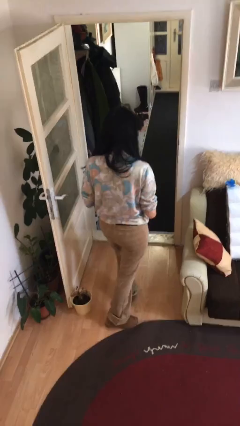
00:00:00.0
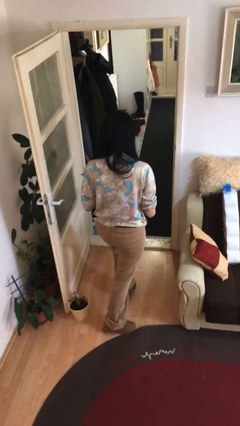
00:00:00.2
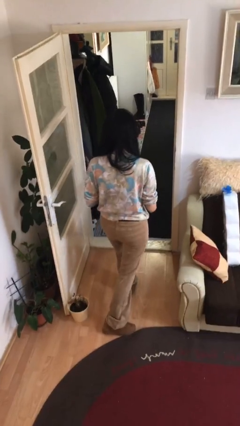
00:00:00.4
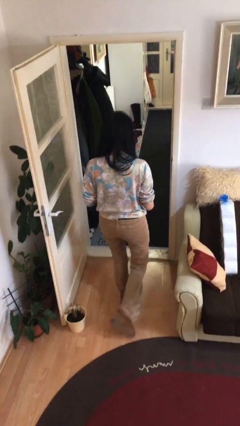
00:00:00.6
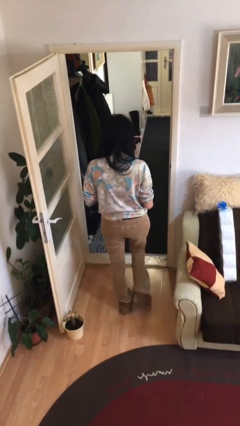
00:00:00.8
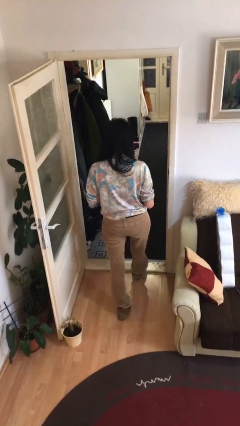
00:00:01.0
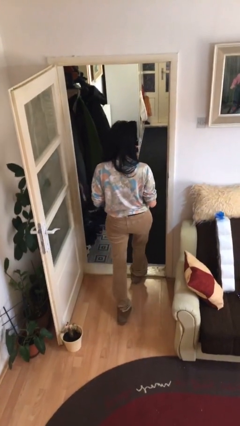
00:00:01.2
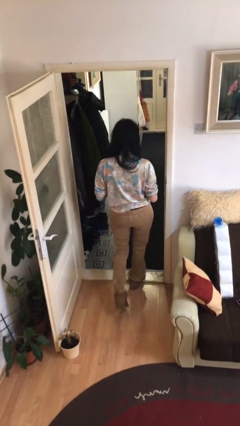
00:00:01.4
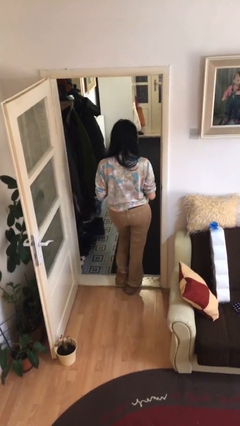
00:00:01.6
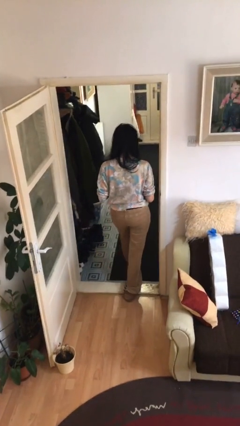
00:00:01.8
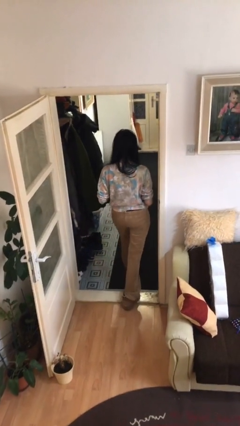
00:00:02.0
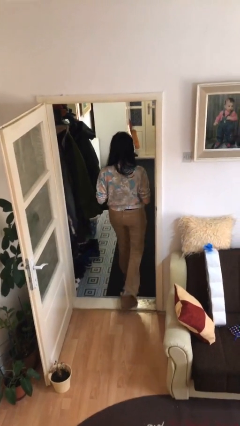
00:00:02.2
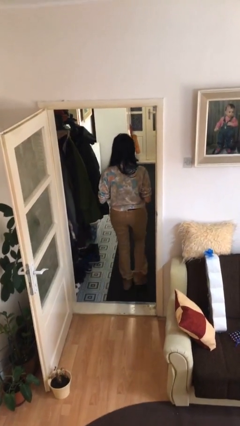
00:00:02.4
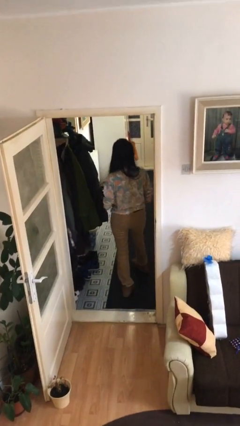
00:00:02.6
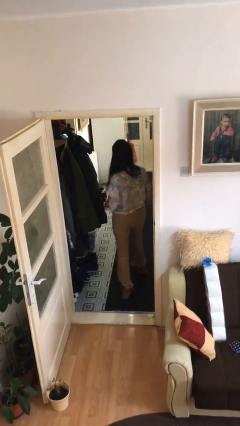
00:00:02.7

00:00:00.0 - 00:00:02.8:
person exits scene through structure

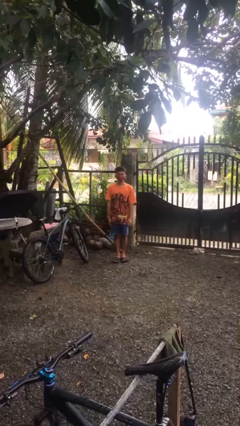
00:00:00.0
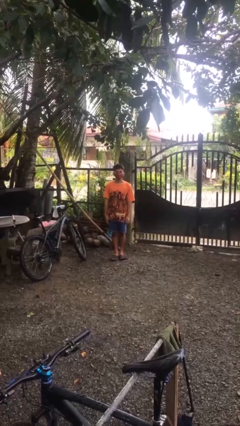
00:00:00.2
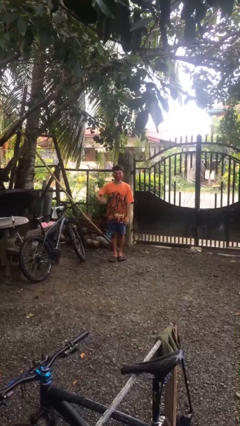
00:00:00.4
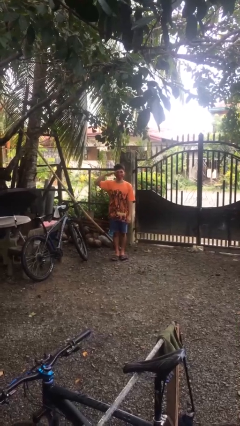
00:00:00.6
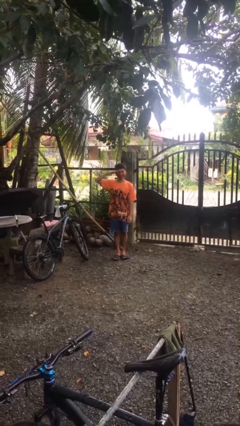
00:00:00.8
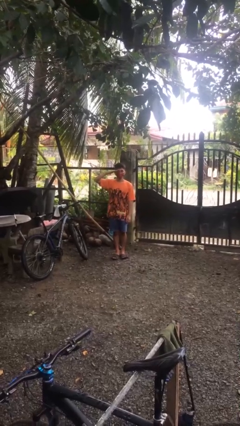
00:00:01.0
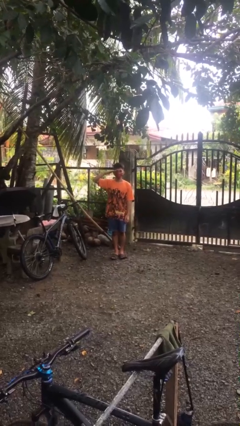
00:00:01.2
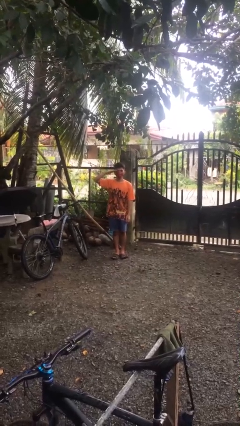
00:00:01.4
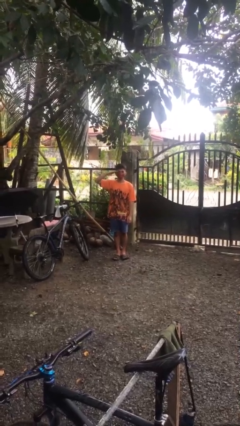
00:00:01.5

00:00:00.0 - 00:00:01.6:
person salutes

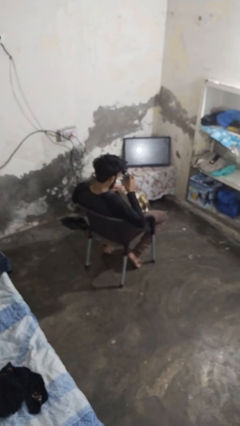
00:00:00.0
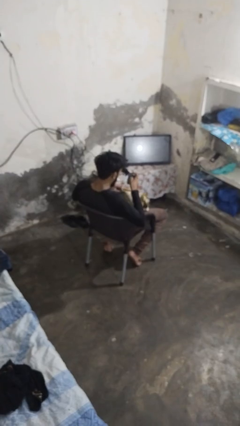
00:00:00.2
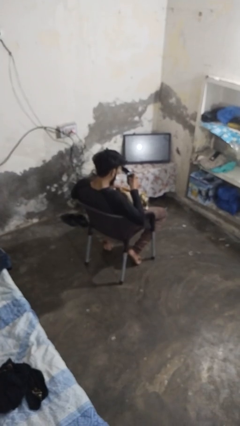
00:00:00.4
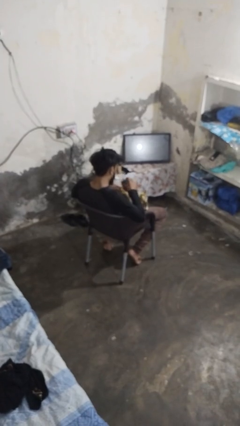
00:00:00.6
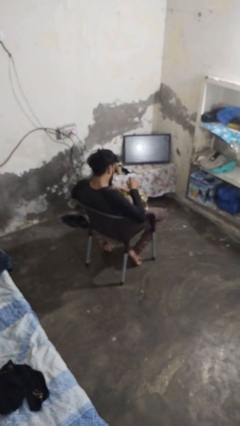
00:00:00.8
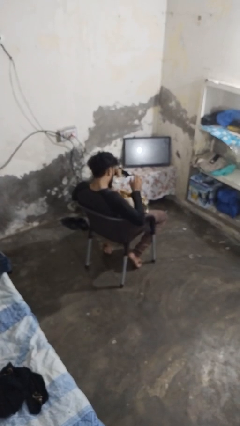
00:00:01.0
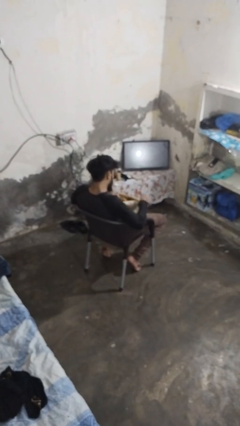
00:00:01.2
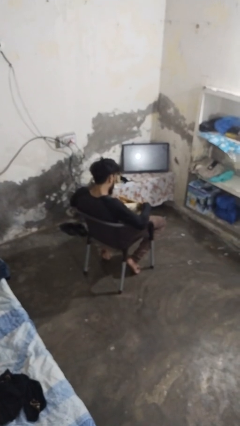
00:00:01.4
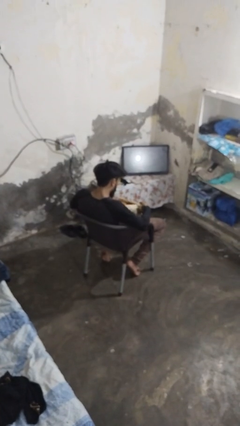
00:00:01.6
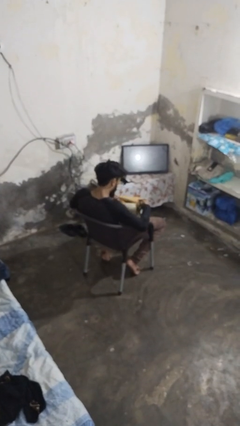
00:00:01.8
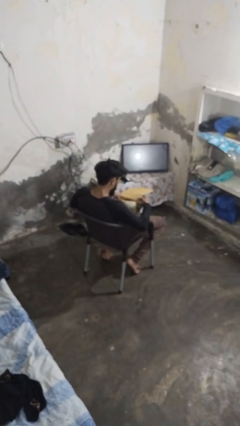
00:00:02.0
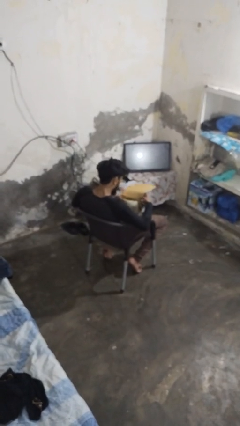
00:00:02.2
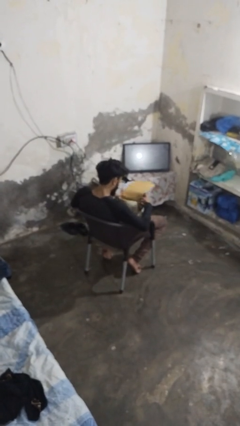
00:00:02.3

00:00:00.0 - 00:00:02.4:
person puts object into purse

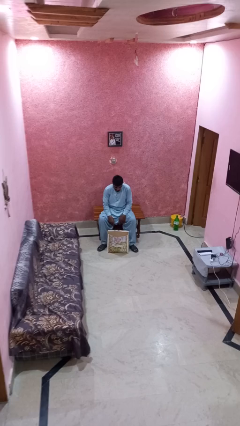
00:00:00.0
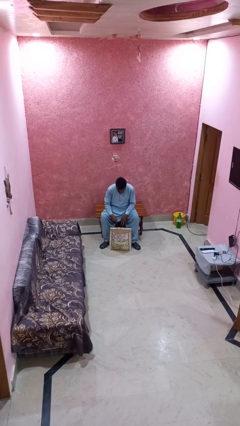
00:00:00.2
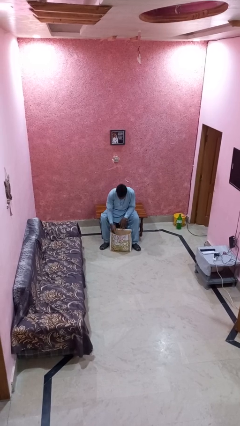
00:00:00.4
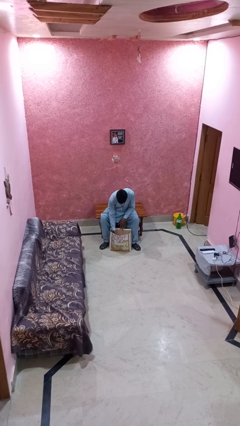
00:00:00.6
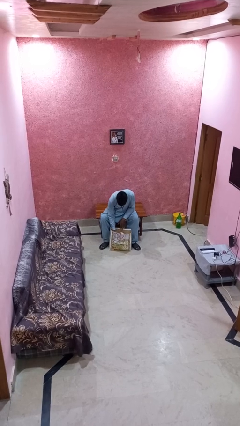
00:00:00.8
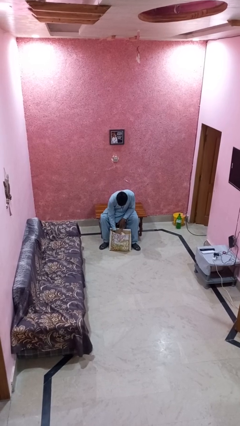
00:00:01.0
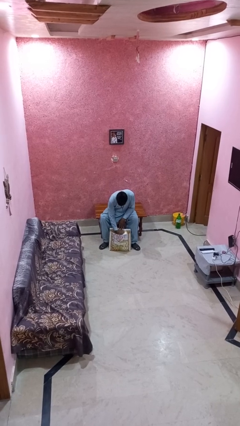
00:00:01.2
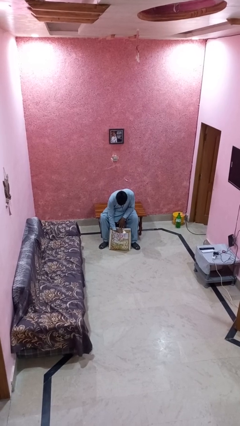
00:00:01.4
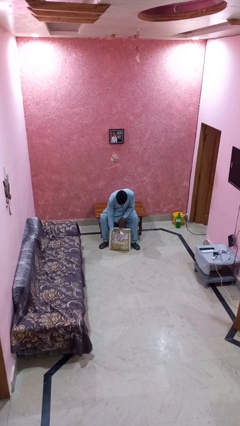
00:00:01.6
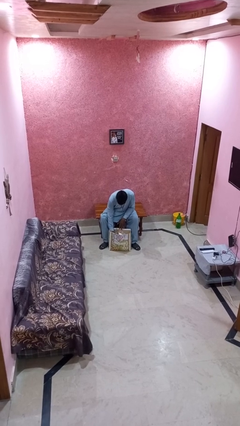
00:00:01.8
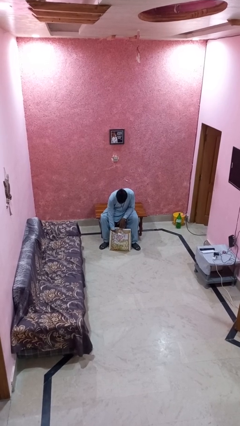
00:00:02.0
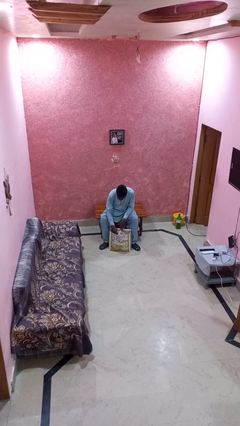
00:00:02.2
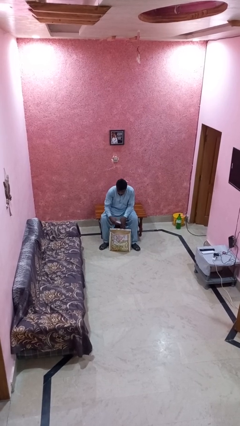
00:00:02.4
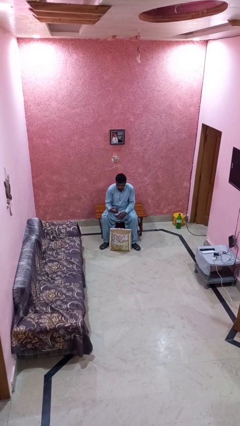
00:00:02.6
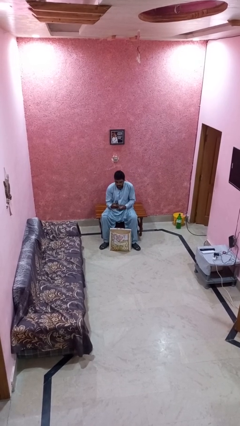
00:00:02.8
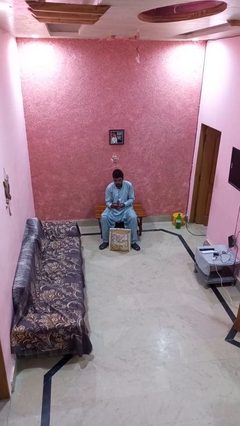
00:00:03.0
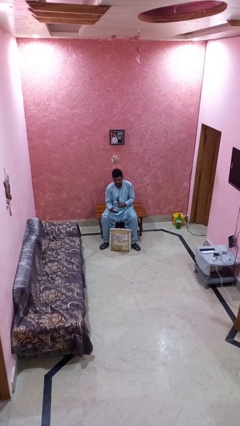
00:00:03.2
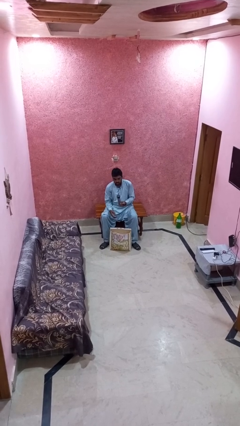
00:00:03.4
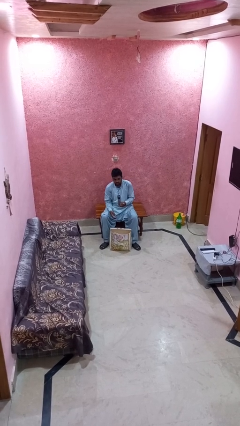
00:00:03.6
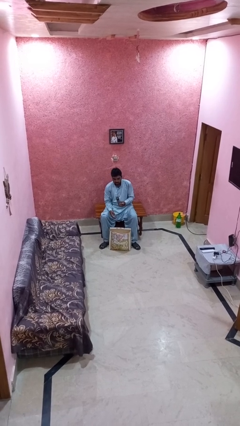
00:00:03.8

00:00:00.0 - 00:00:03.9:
person takes object from bag

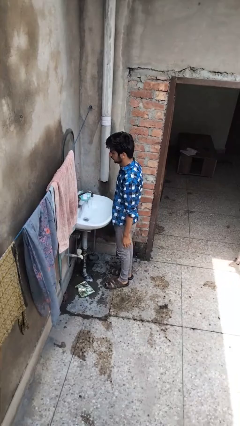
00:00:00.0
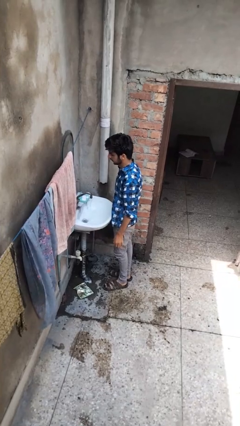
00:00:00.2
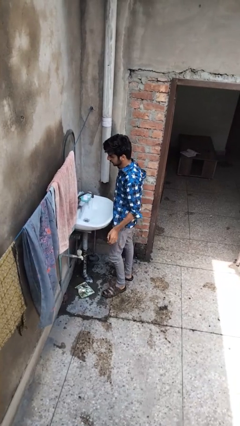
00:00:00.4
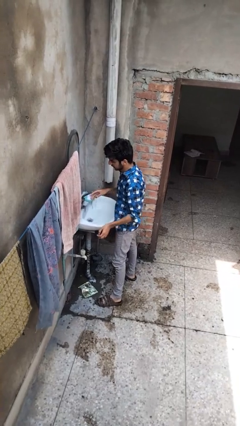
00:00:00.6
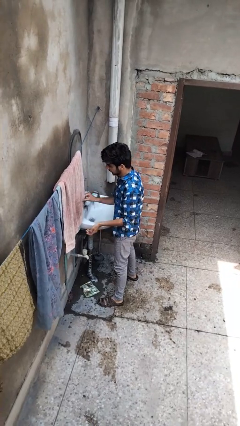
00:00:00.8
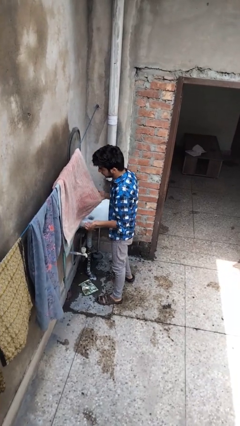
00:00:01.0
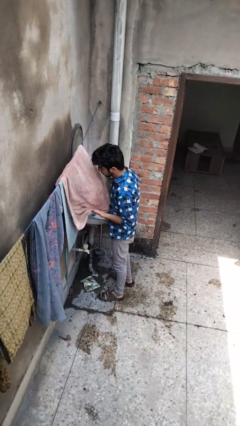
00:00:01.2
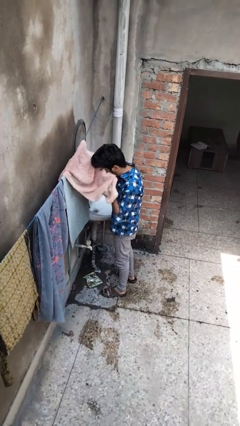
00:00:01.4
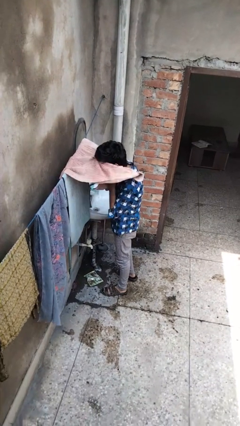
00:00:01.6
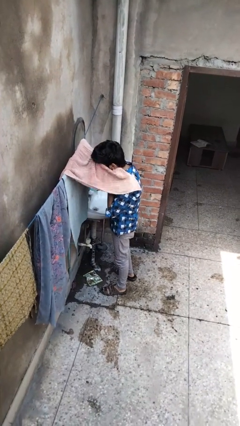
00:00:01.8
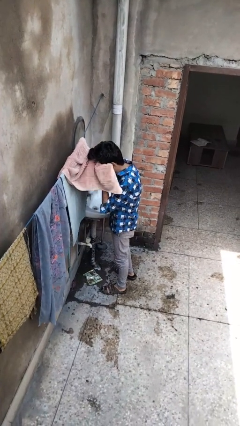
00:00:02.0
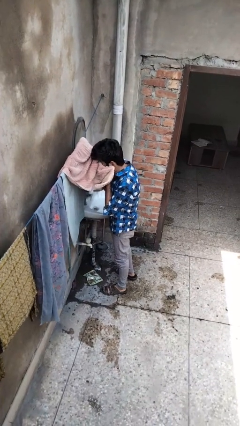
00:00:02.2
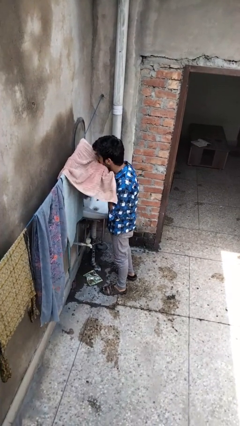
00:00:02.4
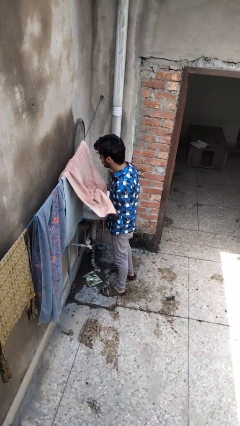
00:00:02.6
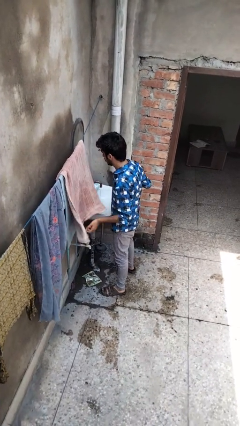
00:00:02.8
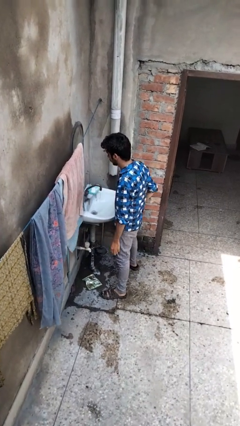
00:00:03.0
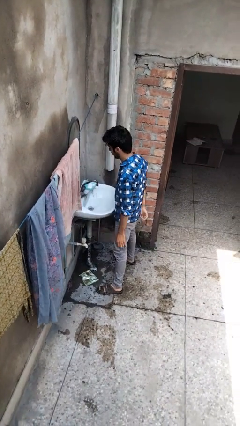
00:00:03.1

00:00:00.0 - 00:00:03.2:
person dries face with towel

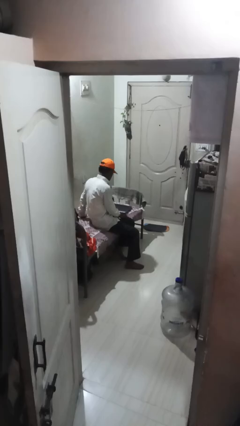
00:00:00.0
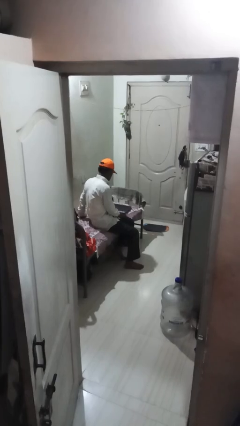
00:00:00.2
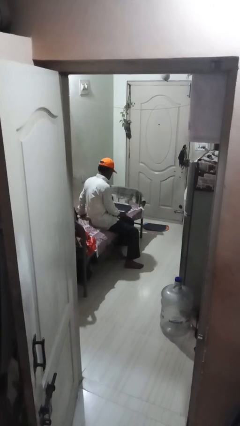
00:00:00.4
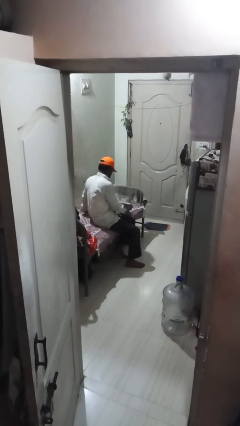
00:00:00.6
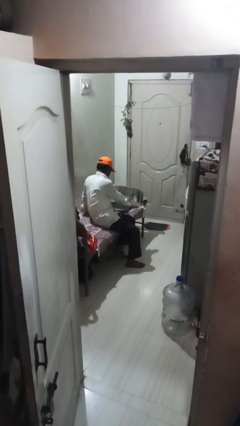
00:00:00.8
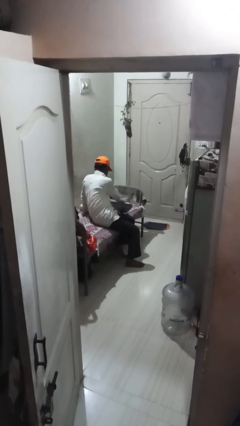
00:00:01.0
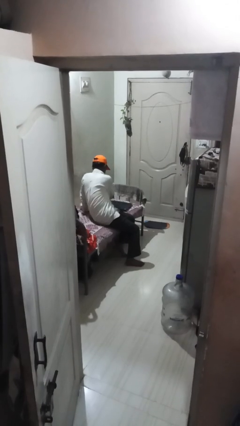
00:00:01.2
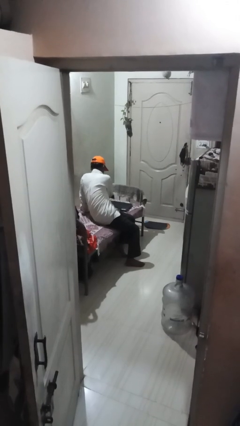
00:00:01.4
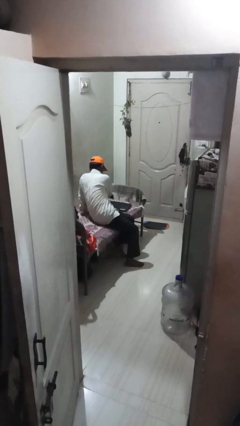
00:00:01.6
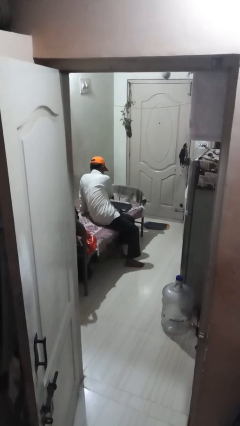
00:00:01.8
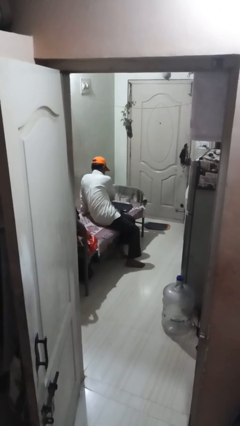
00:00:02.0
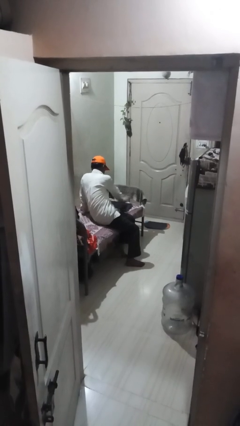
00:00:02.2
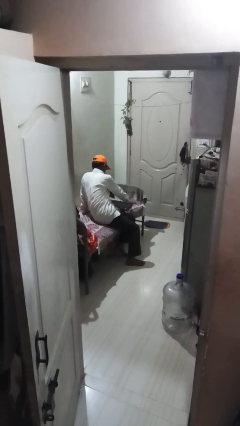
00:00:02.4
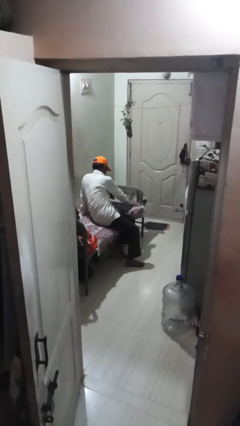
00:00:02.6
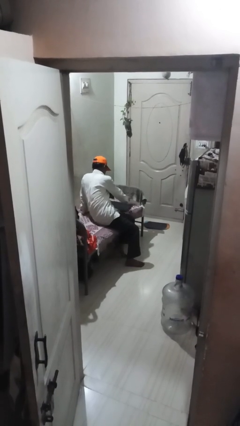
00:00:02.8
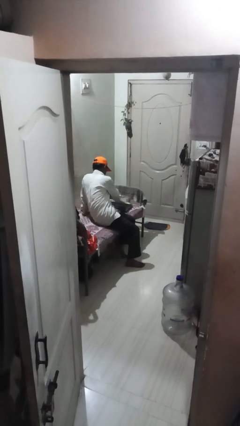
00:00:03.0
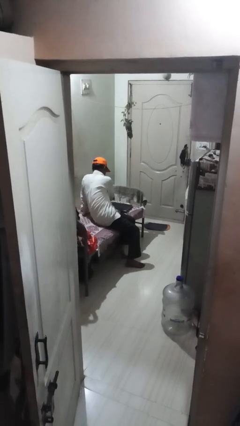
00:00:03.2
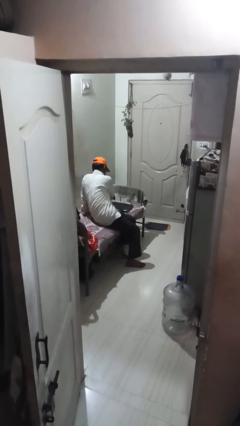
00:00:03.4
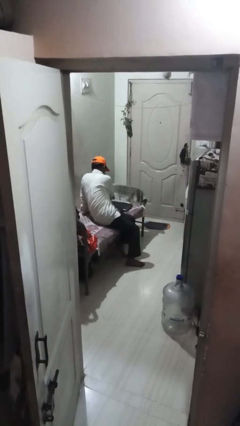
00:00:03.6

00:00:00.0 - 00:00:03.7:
person waves hand over object
